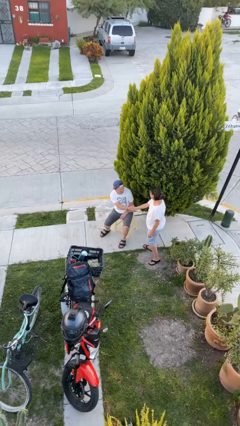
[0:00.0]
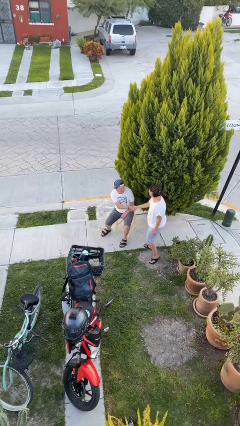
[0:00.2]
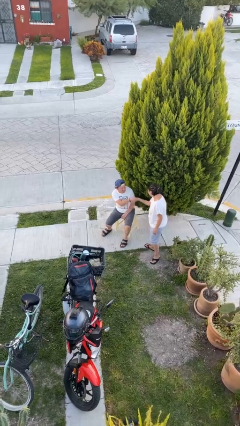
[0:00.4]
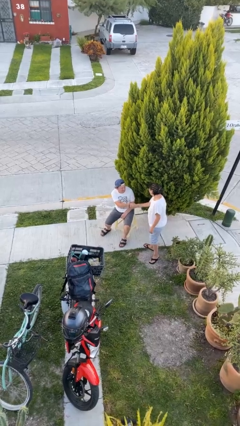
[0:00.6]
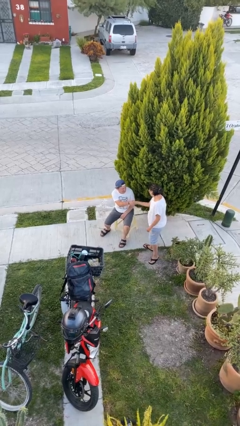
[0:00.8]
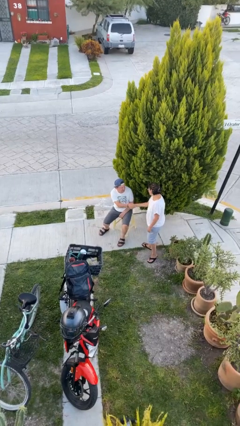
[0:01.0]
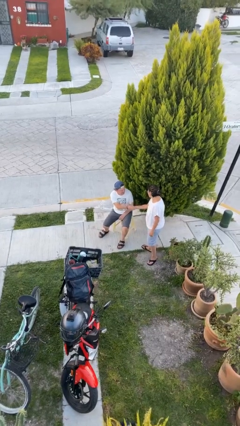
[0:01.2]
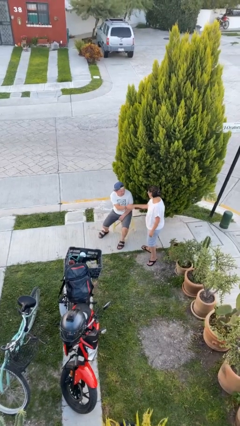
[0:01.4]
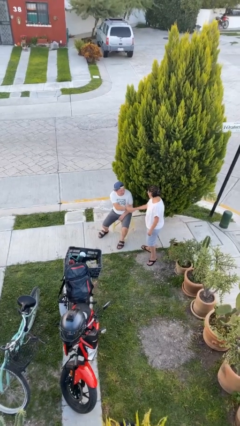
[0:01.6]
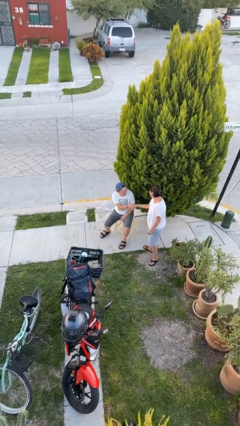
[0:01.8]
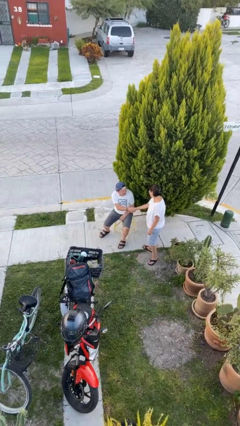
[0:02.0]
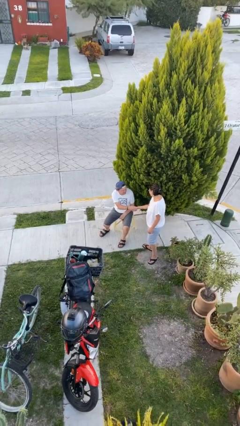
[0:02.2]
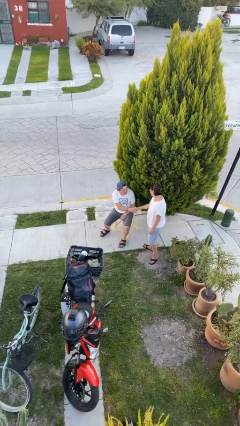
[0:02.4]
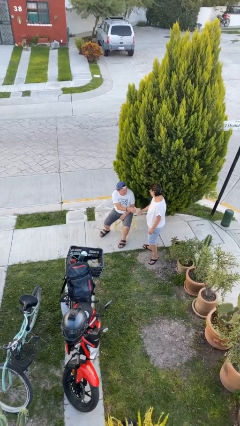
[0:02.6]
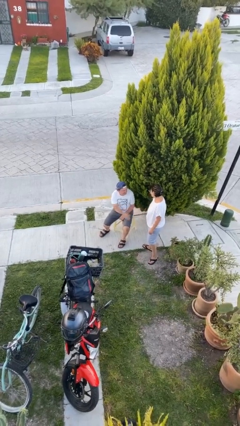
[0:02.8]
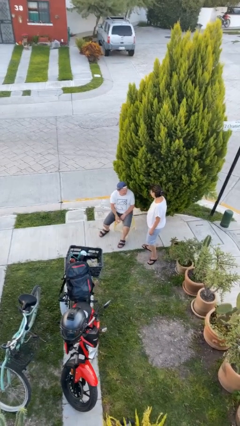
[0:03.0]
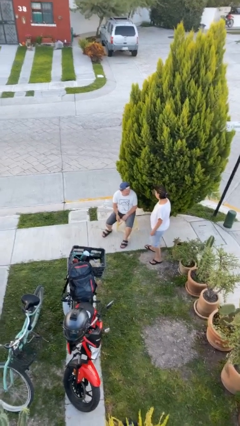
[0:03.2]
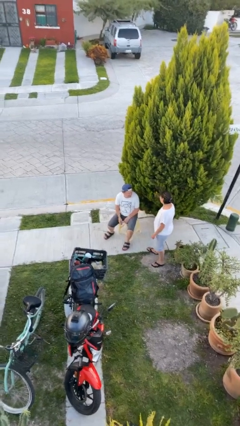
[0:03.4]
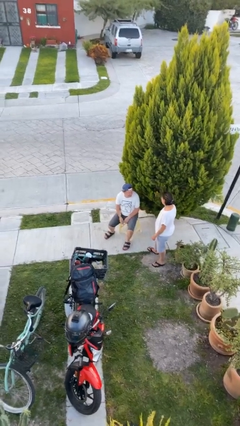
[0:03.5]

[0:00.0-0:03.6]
person shakes hand

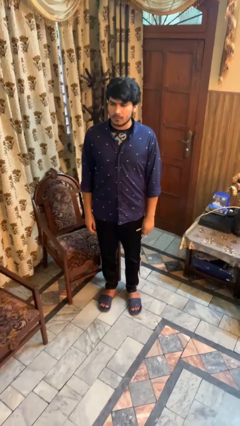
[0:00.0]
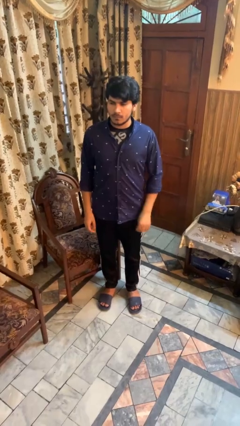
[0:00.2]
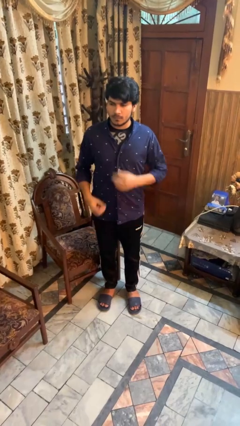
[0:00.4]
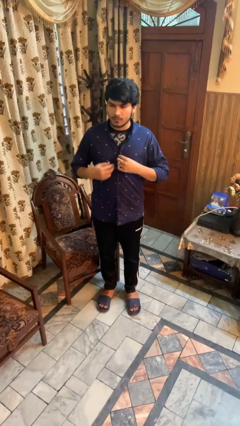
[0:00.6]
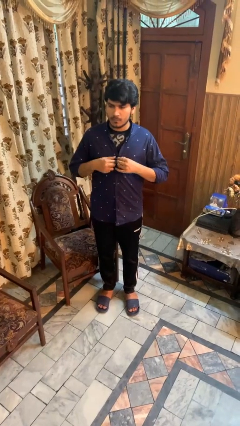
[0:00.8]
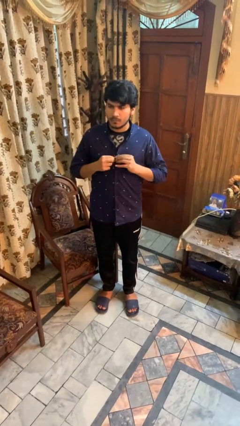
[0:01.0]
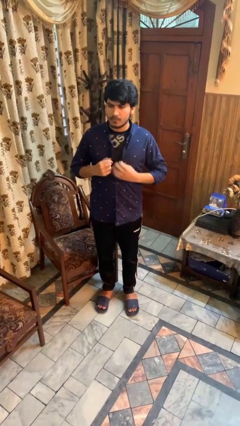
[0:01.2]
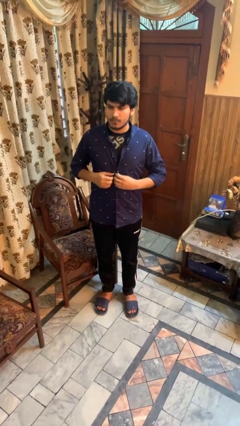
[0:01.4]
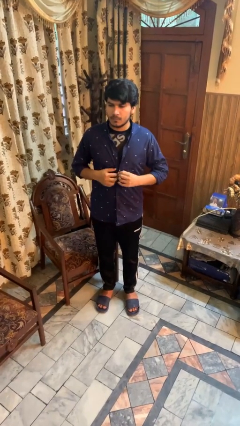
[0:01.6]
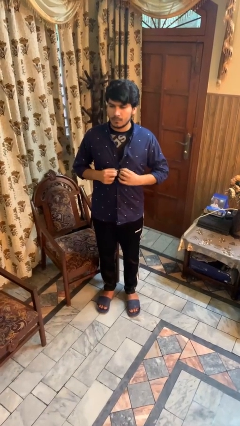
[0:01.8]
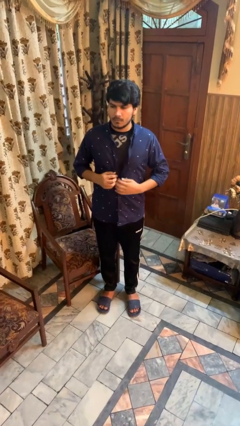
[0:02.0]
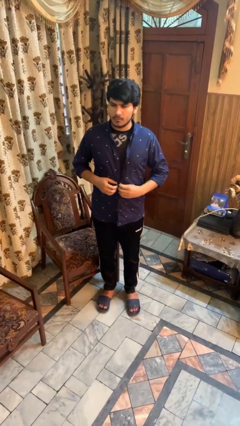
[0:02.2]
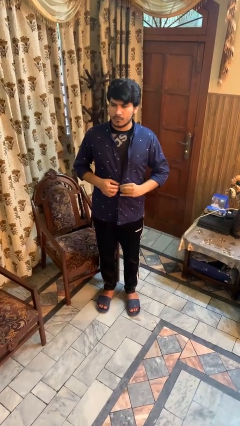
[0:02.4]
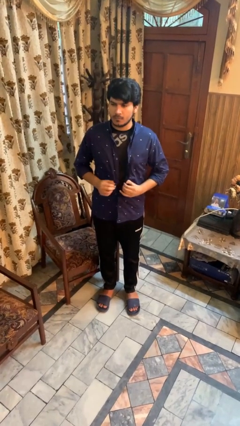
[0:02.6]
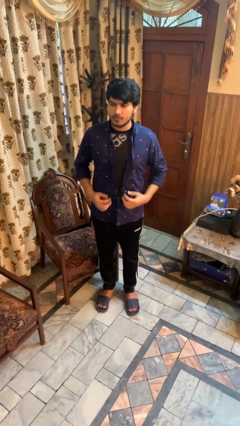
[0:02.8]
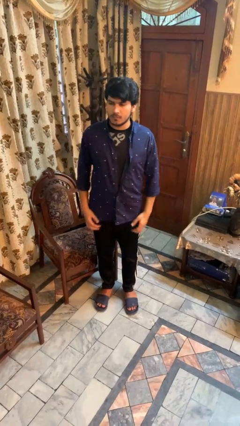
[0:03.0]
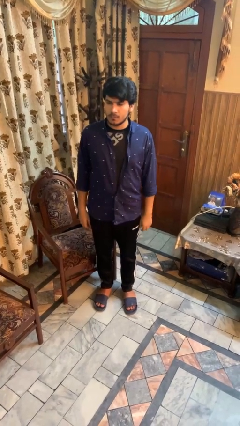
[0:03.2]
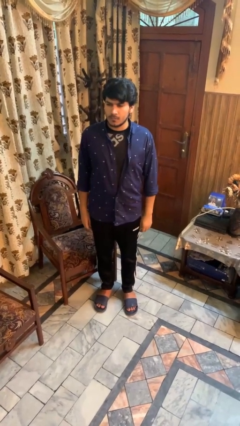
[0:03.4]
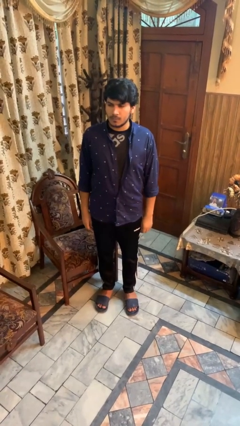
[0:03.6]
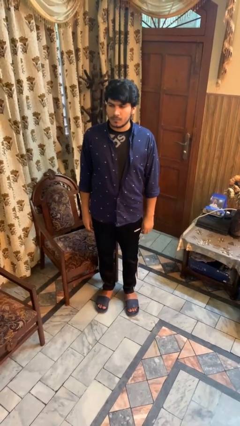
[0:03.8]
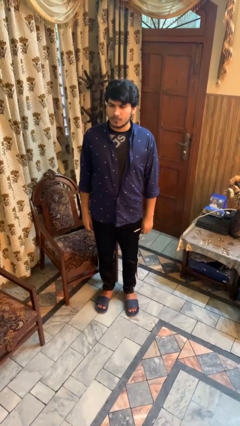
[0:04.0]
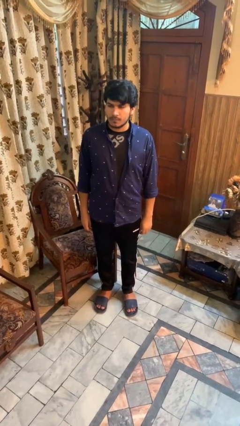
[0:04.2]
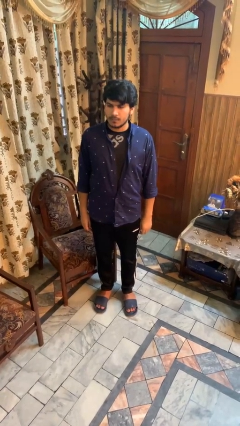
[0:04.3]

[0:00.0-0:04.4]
person unbuttons shirt

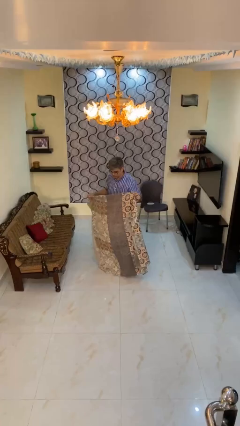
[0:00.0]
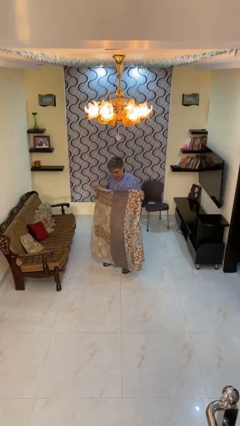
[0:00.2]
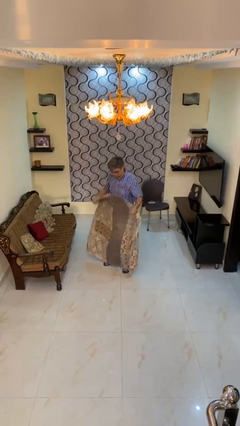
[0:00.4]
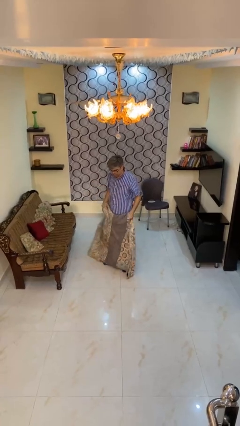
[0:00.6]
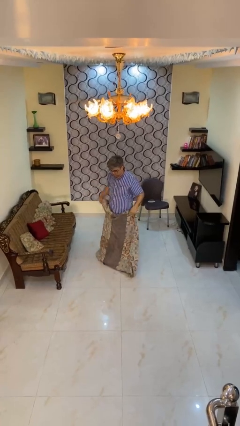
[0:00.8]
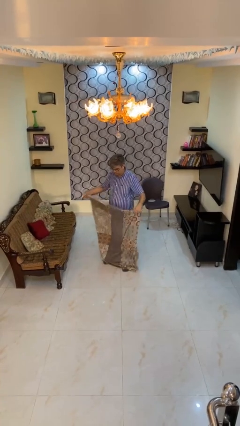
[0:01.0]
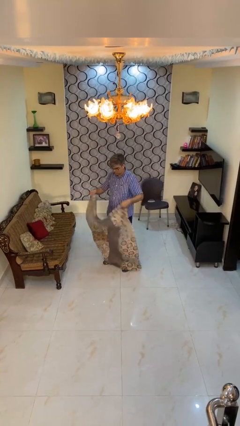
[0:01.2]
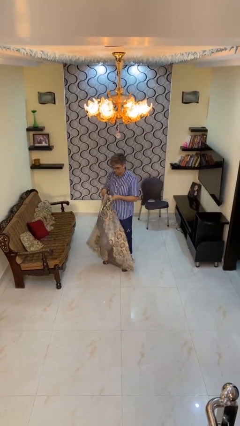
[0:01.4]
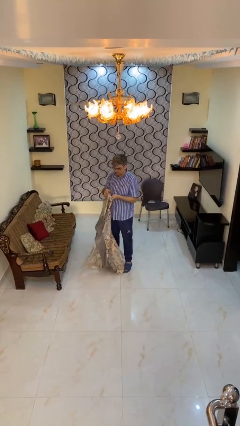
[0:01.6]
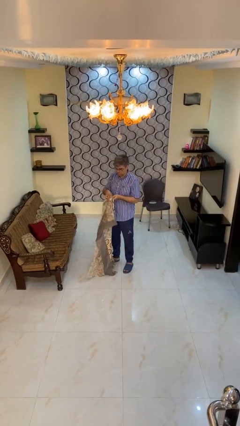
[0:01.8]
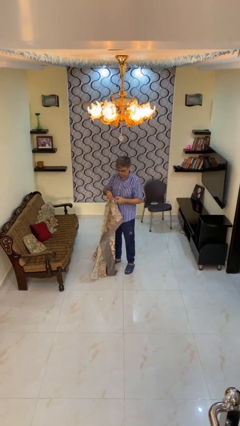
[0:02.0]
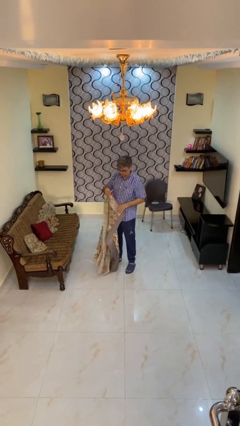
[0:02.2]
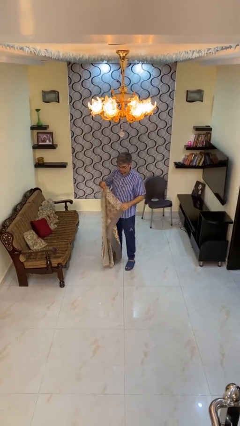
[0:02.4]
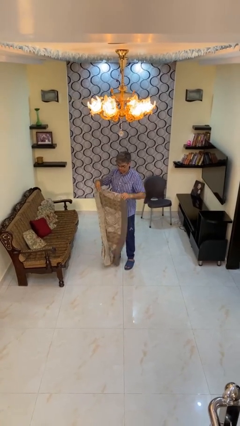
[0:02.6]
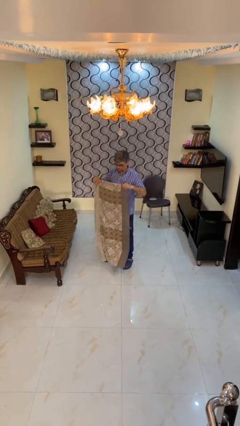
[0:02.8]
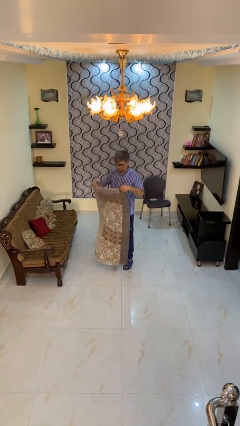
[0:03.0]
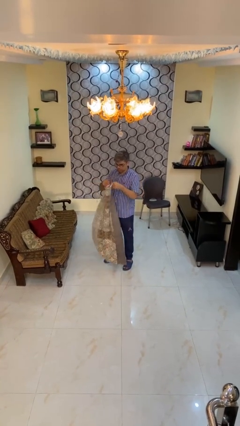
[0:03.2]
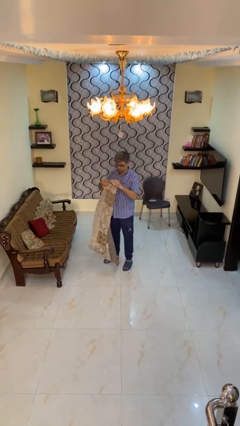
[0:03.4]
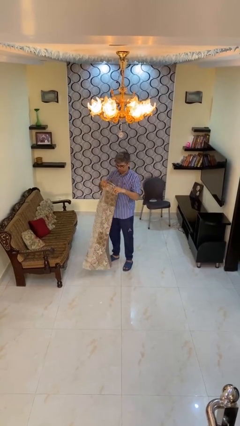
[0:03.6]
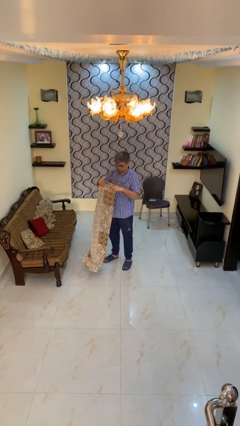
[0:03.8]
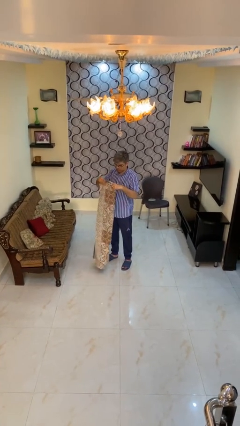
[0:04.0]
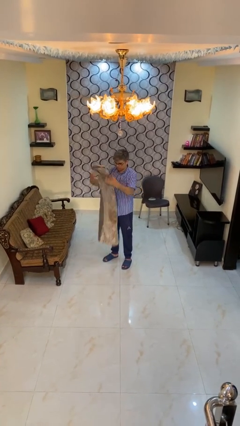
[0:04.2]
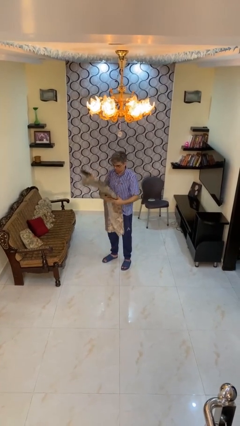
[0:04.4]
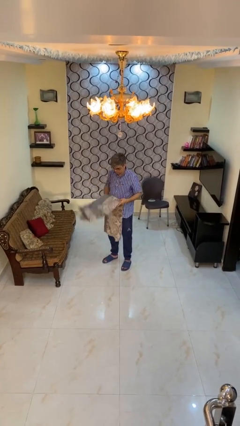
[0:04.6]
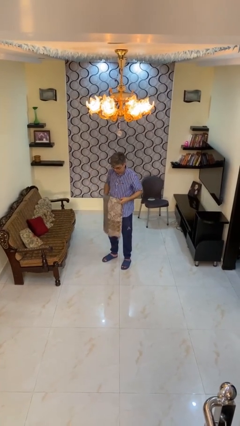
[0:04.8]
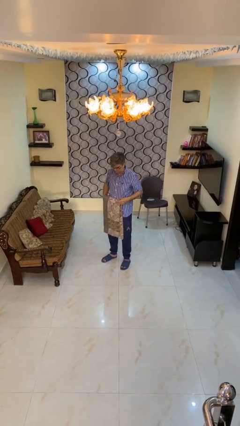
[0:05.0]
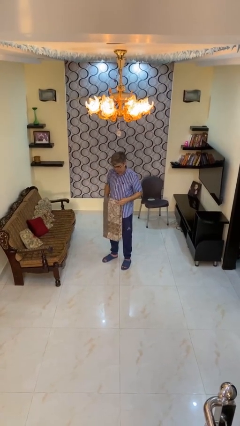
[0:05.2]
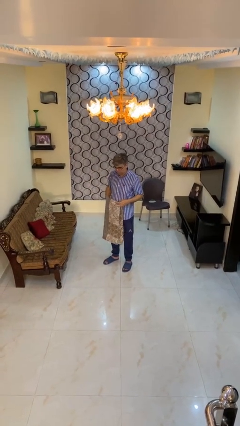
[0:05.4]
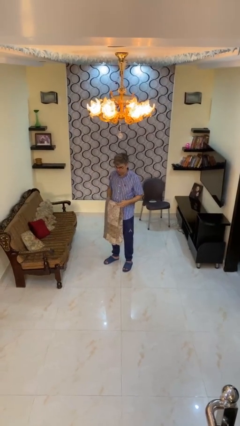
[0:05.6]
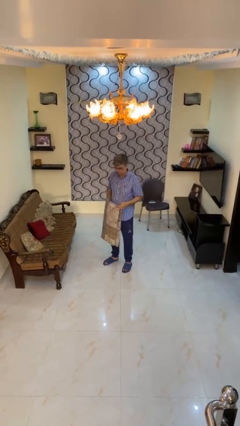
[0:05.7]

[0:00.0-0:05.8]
person folds blanket

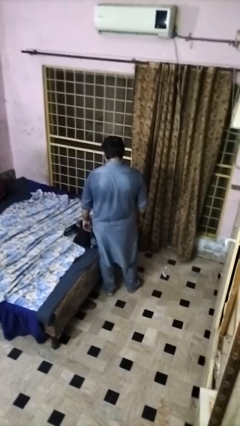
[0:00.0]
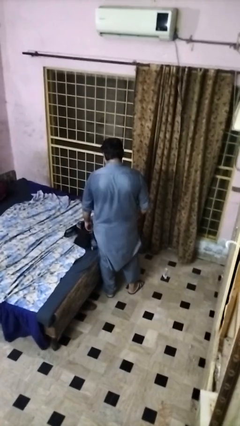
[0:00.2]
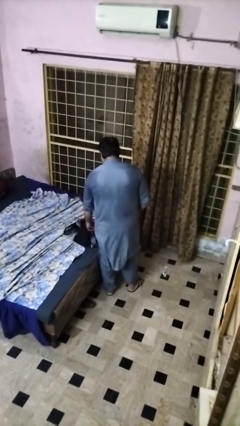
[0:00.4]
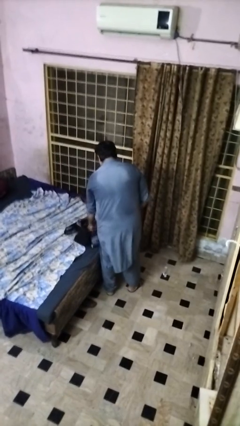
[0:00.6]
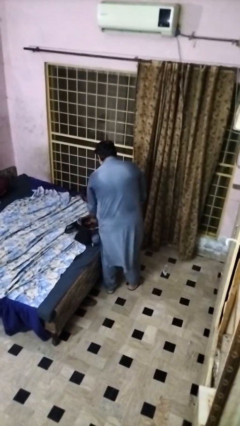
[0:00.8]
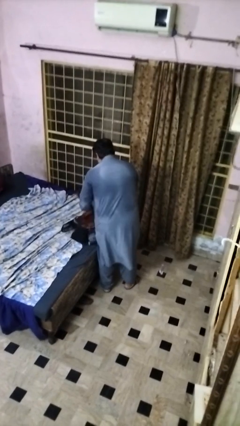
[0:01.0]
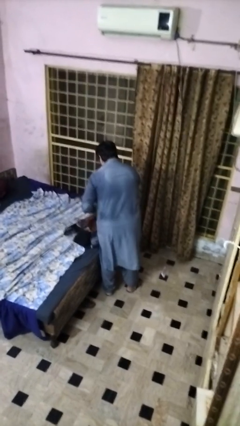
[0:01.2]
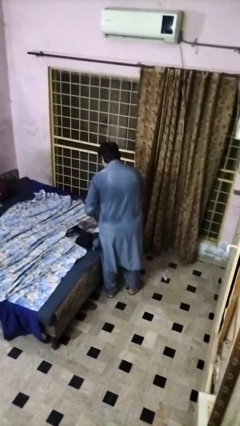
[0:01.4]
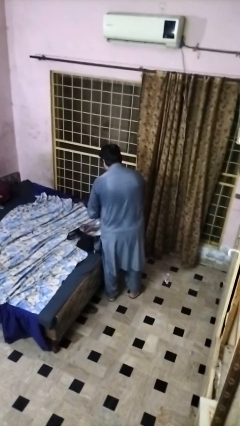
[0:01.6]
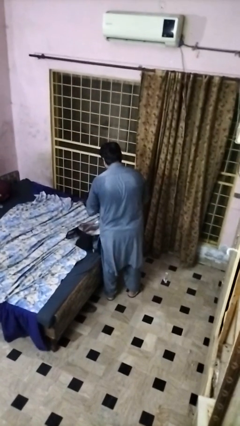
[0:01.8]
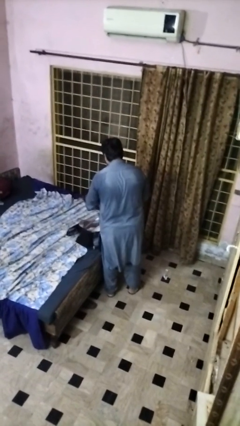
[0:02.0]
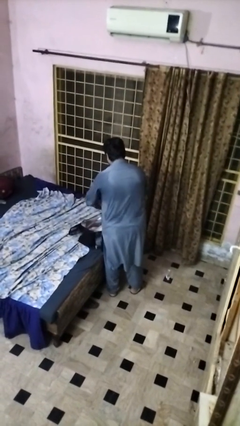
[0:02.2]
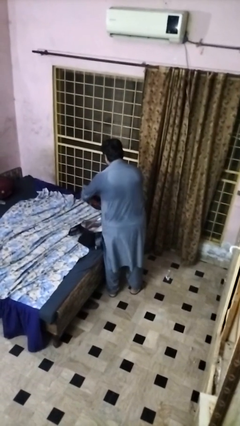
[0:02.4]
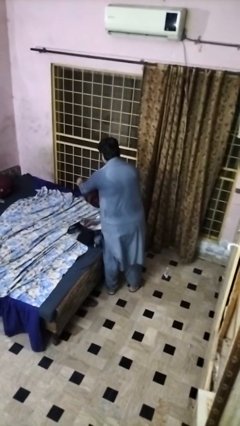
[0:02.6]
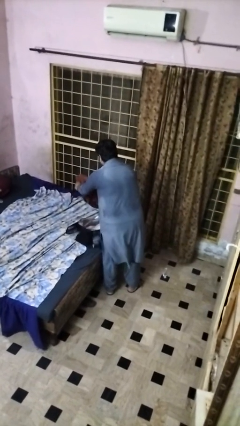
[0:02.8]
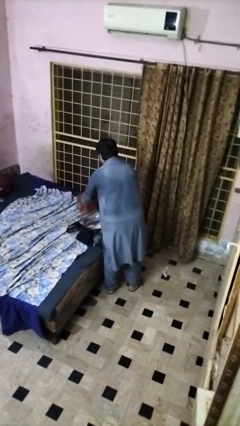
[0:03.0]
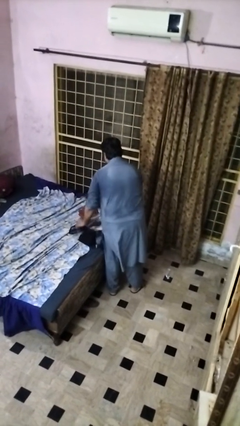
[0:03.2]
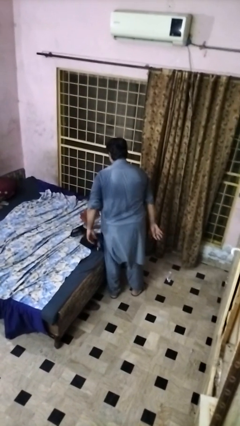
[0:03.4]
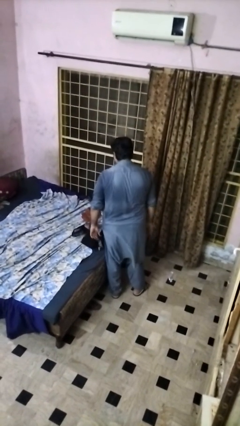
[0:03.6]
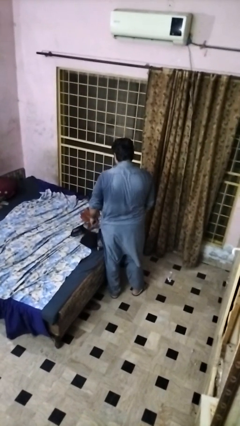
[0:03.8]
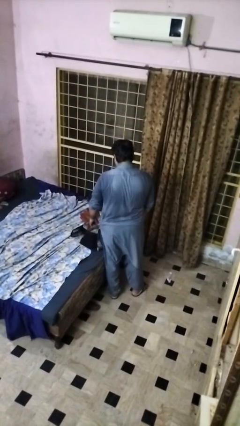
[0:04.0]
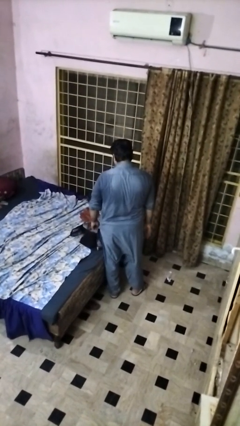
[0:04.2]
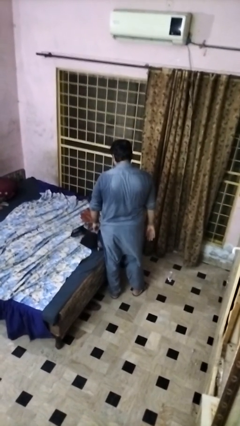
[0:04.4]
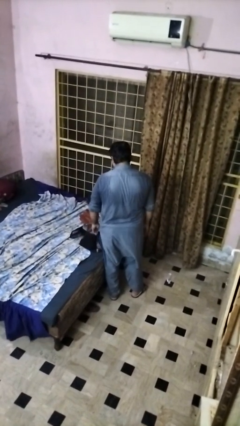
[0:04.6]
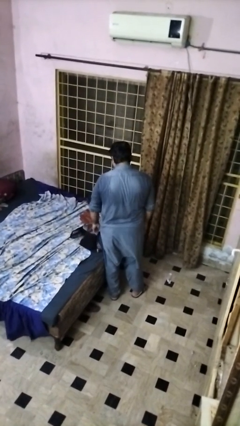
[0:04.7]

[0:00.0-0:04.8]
person unloads clothes from suitcase
